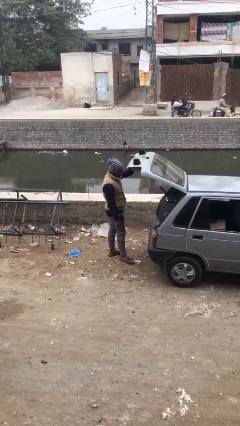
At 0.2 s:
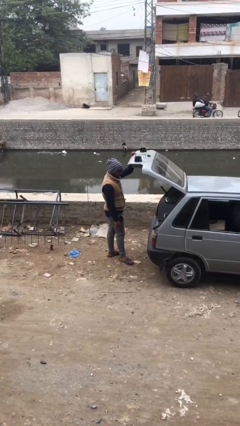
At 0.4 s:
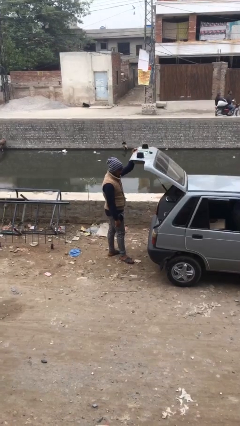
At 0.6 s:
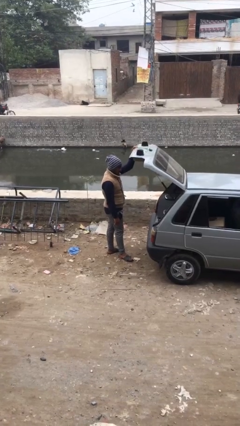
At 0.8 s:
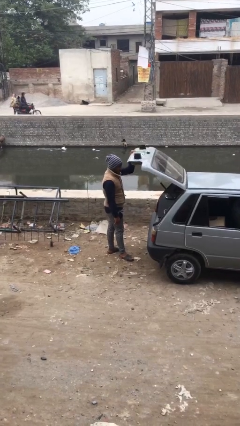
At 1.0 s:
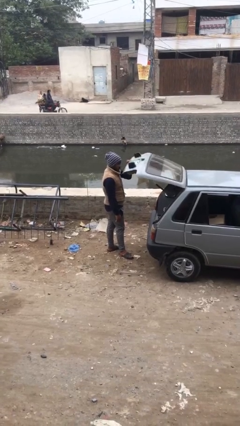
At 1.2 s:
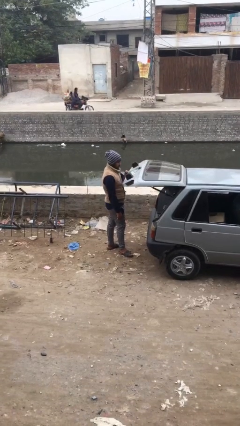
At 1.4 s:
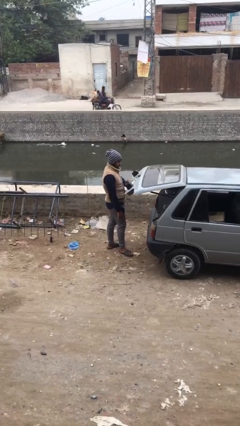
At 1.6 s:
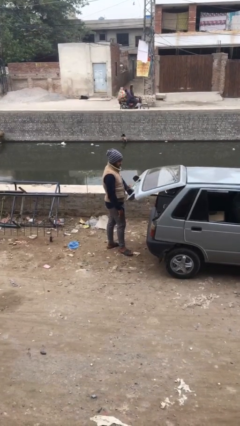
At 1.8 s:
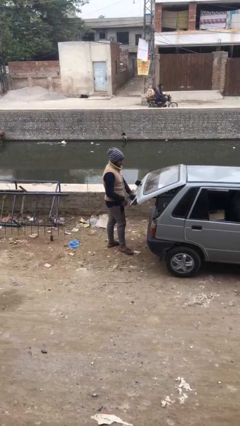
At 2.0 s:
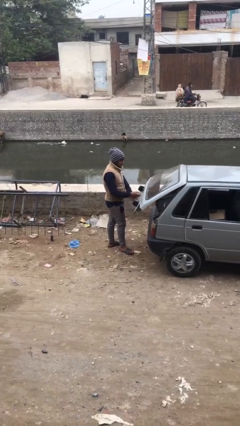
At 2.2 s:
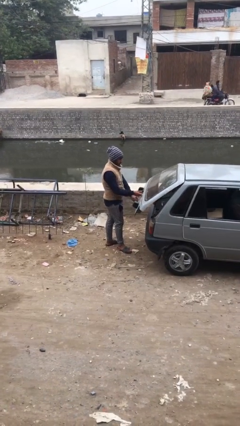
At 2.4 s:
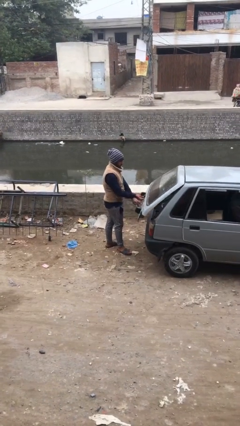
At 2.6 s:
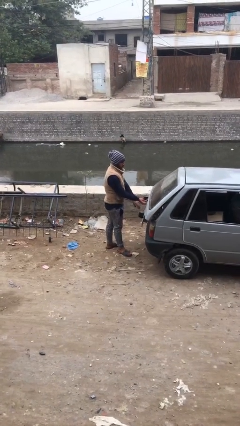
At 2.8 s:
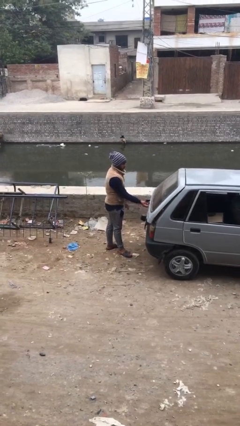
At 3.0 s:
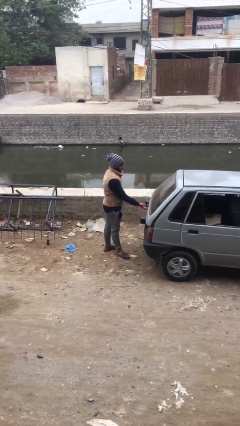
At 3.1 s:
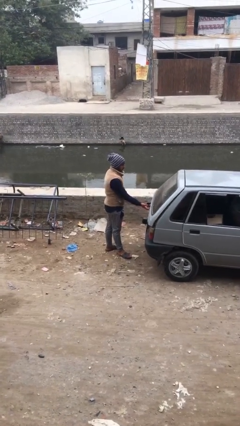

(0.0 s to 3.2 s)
person closes car trunk

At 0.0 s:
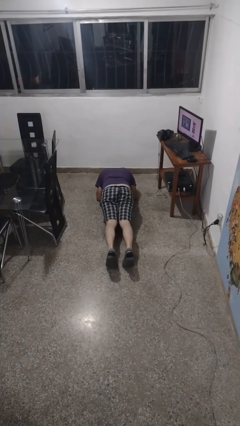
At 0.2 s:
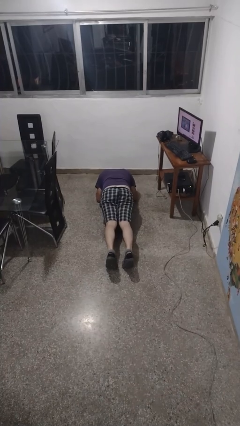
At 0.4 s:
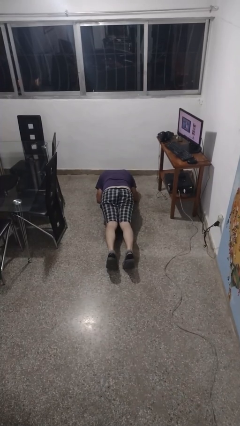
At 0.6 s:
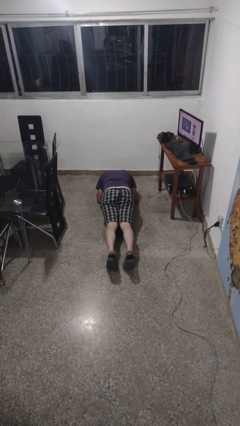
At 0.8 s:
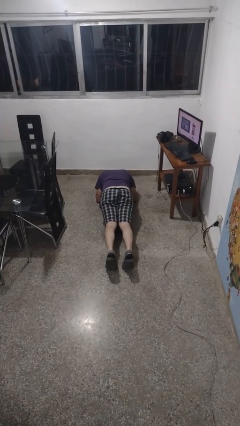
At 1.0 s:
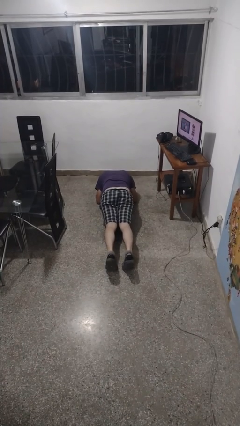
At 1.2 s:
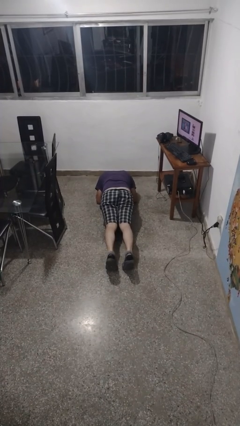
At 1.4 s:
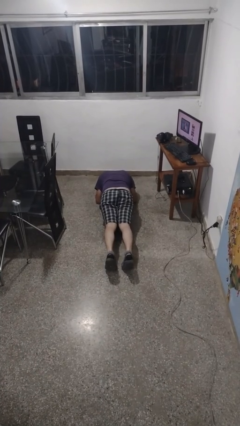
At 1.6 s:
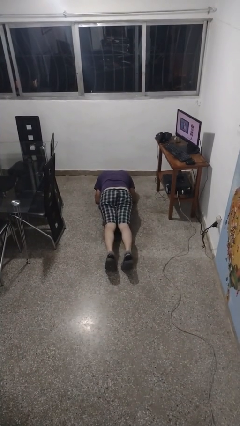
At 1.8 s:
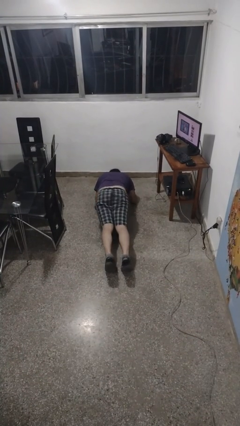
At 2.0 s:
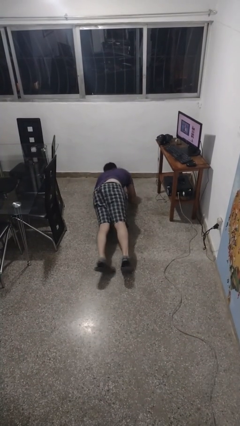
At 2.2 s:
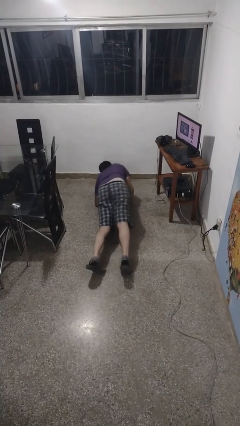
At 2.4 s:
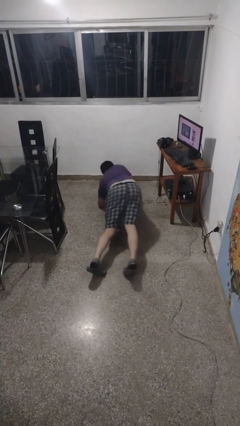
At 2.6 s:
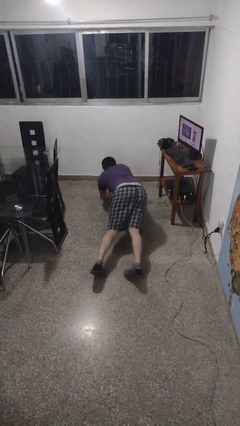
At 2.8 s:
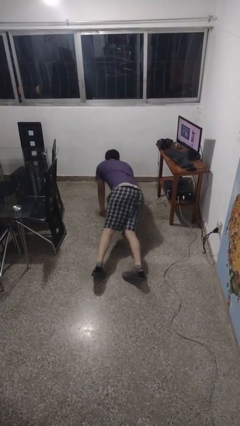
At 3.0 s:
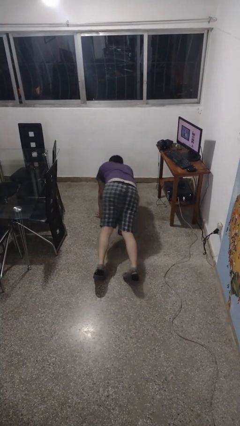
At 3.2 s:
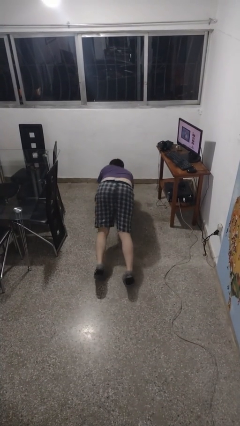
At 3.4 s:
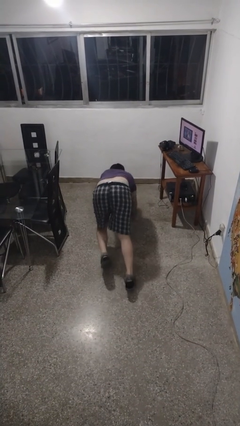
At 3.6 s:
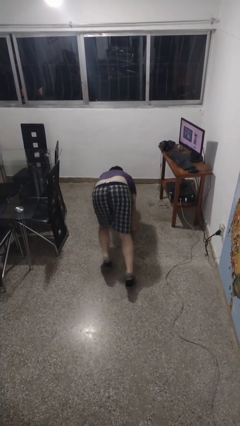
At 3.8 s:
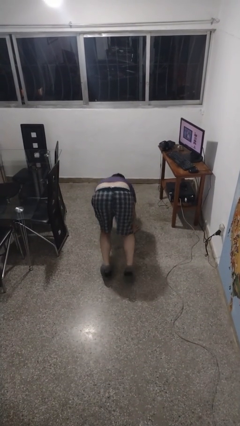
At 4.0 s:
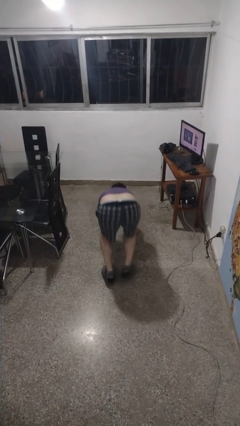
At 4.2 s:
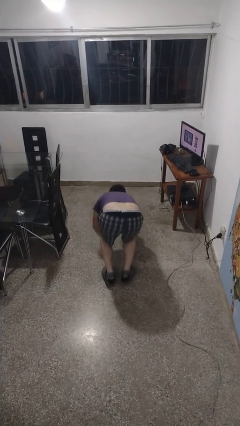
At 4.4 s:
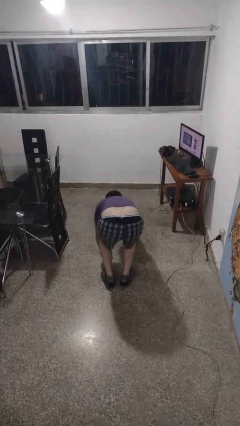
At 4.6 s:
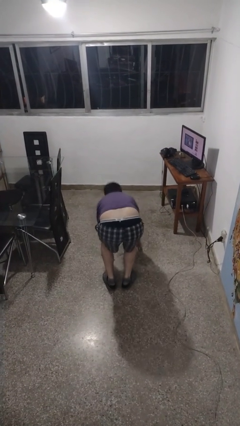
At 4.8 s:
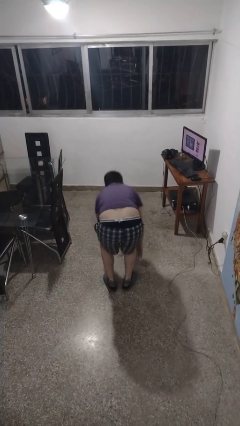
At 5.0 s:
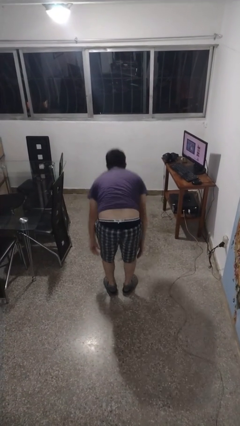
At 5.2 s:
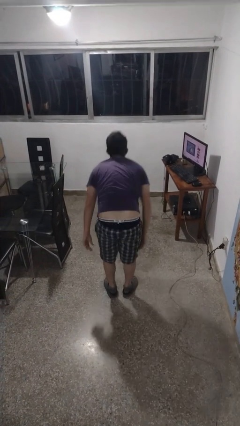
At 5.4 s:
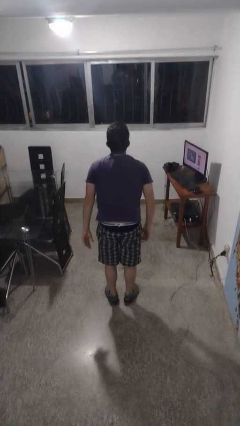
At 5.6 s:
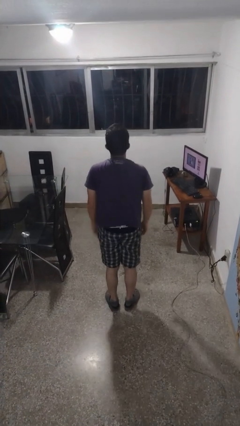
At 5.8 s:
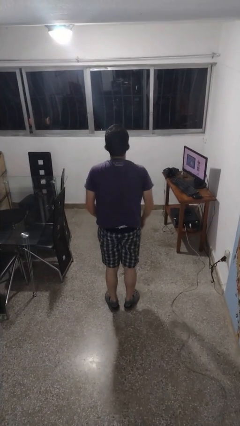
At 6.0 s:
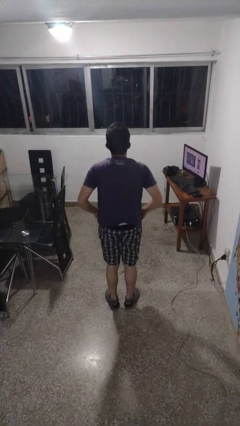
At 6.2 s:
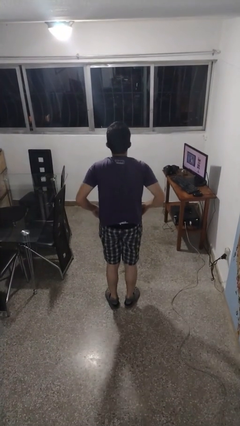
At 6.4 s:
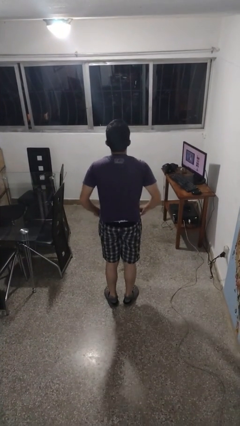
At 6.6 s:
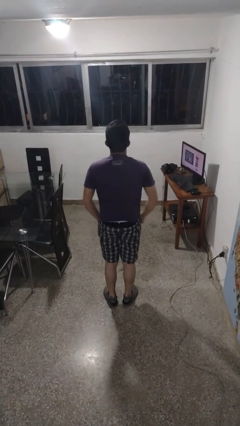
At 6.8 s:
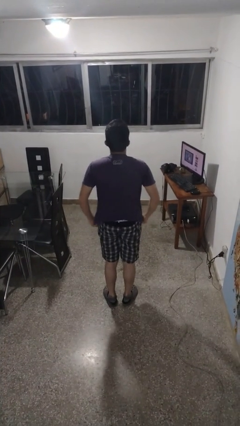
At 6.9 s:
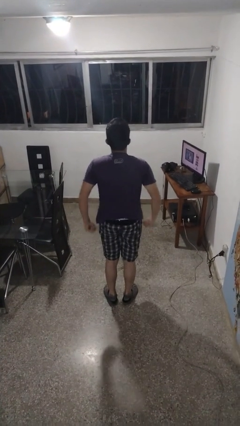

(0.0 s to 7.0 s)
person stands up from floor

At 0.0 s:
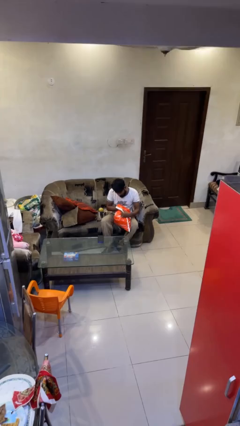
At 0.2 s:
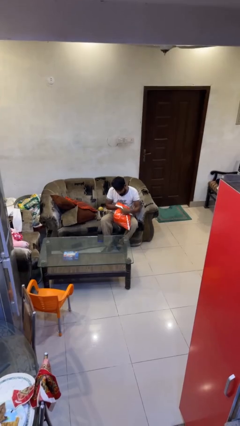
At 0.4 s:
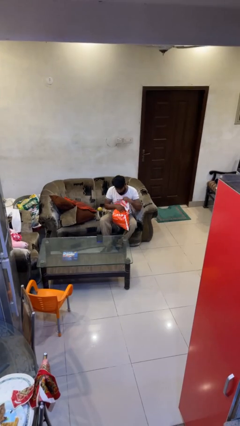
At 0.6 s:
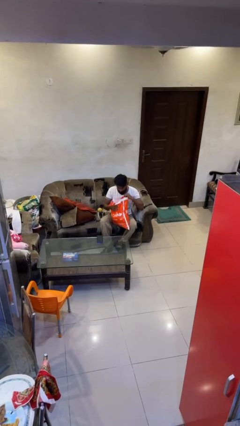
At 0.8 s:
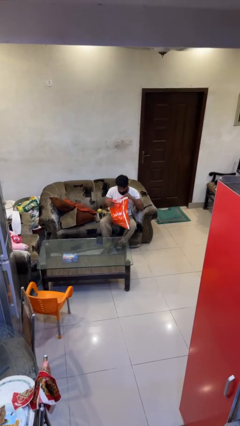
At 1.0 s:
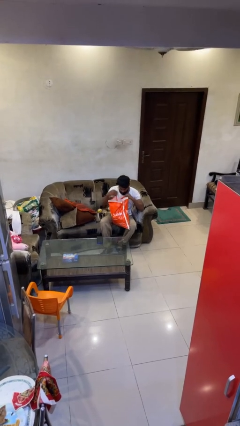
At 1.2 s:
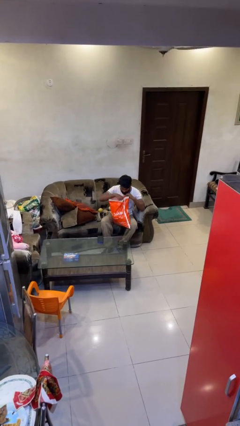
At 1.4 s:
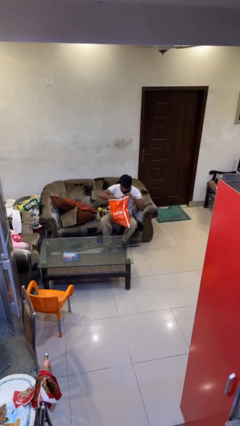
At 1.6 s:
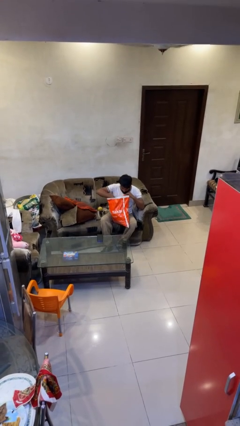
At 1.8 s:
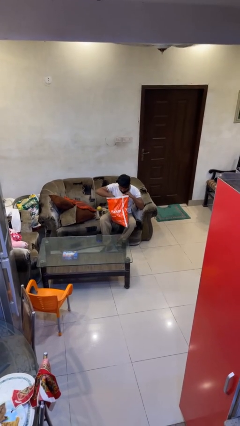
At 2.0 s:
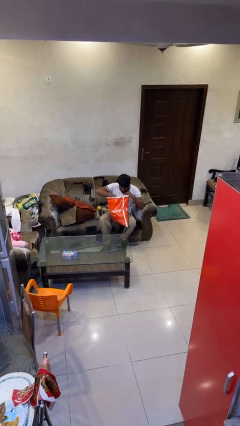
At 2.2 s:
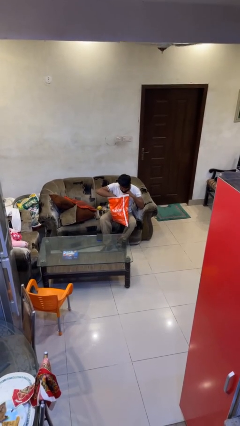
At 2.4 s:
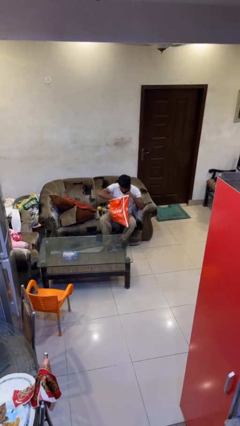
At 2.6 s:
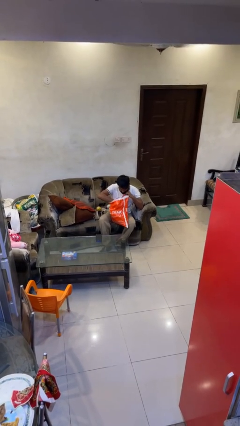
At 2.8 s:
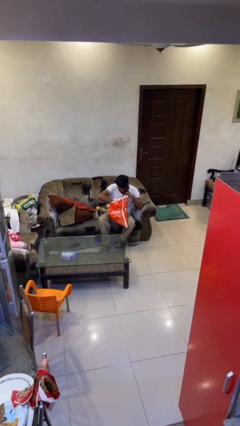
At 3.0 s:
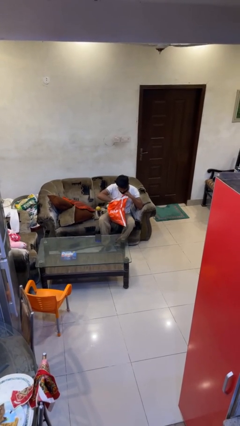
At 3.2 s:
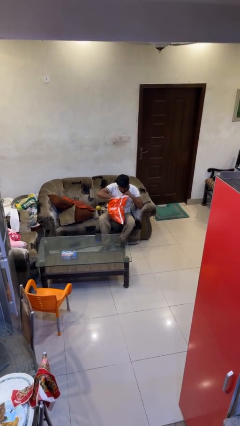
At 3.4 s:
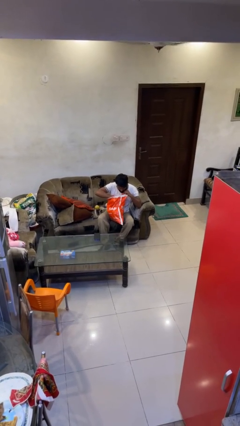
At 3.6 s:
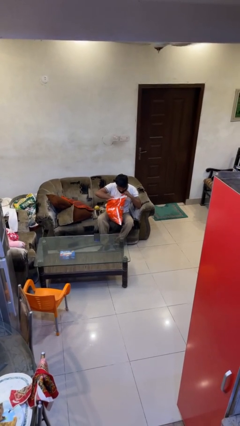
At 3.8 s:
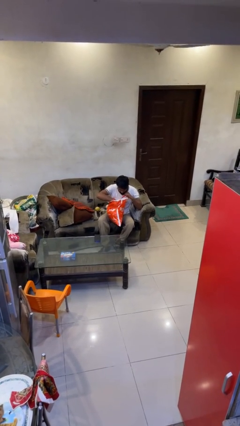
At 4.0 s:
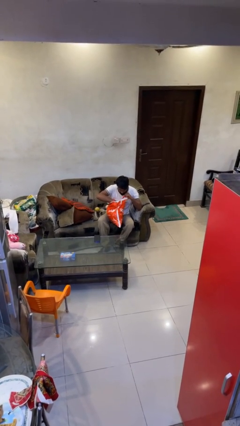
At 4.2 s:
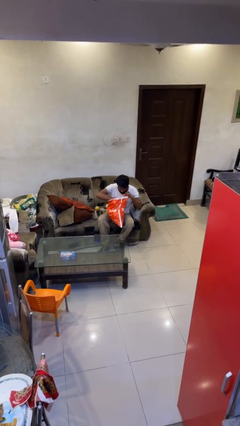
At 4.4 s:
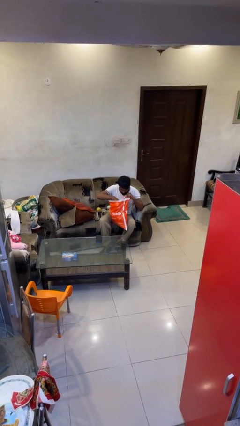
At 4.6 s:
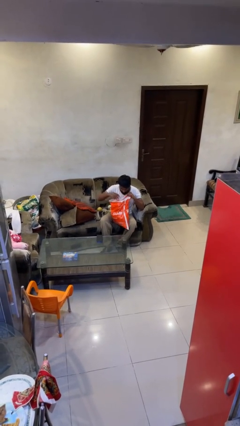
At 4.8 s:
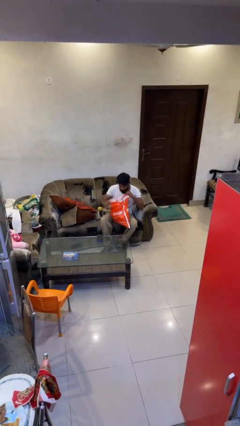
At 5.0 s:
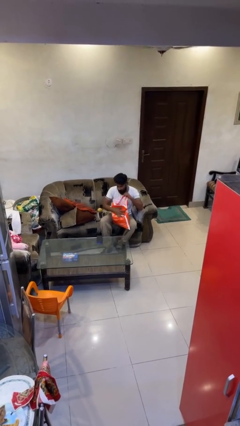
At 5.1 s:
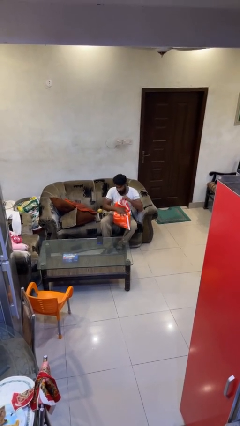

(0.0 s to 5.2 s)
person searches in bag

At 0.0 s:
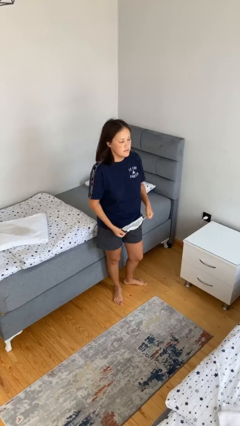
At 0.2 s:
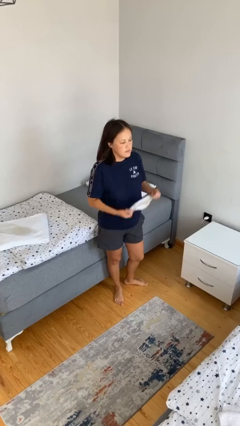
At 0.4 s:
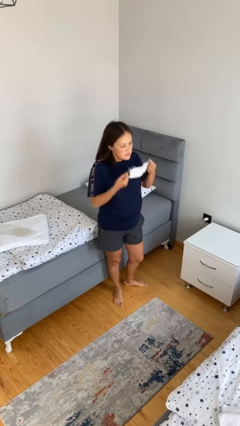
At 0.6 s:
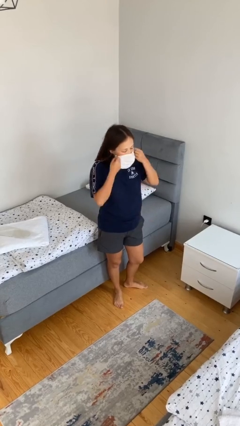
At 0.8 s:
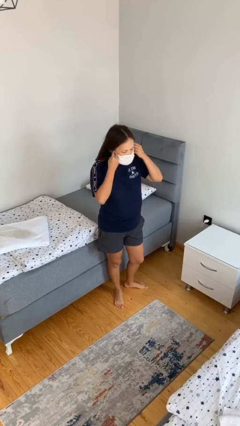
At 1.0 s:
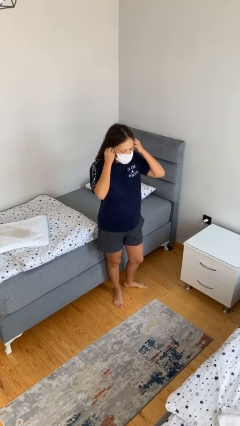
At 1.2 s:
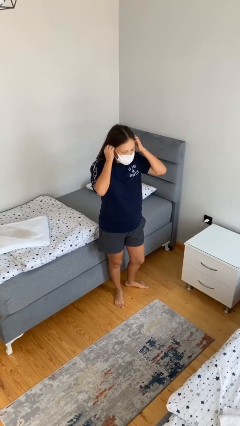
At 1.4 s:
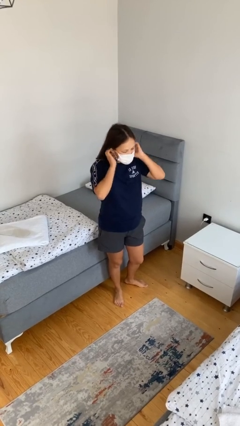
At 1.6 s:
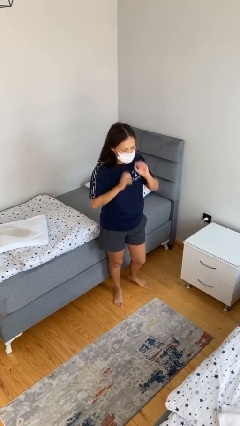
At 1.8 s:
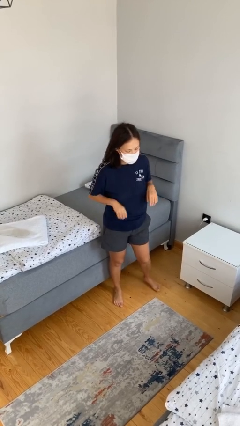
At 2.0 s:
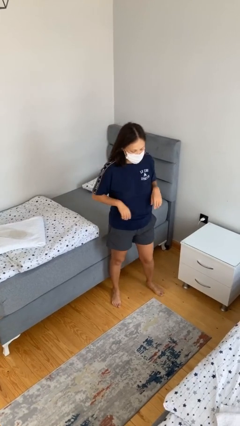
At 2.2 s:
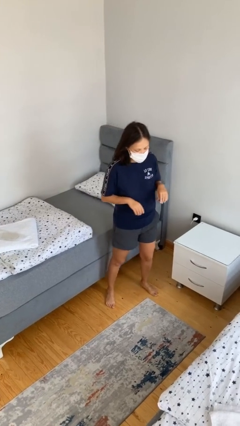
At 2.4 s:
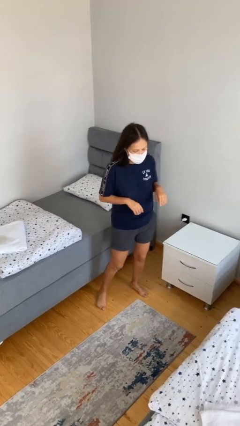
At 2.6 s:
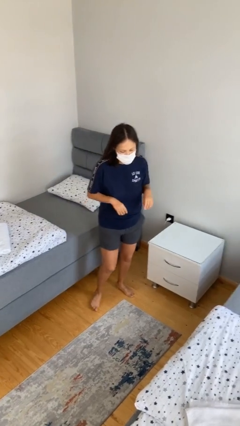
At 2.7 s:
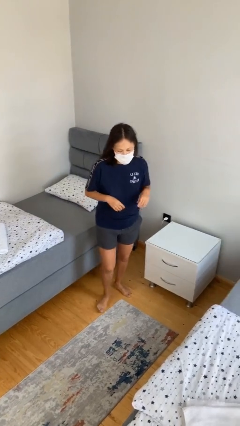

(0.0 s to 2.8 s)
person puts on facemask
